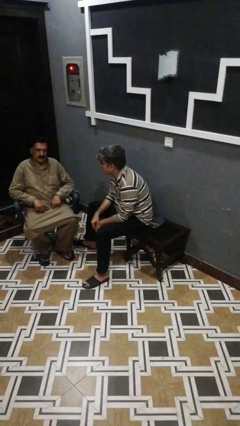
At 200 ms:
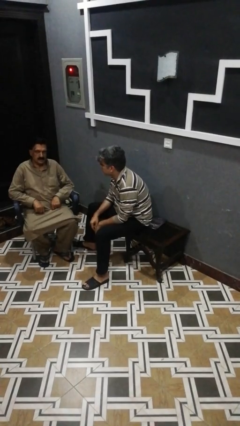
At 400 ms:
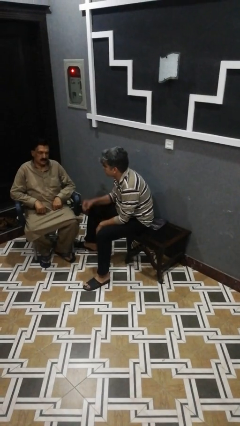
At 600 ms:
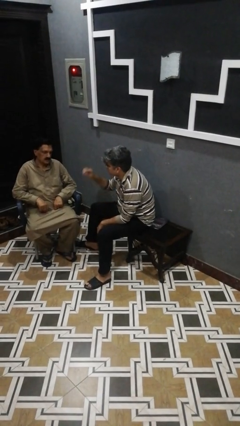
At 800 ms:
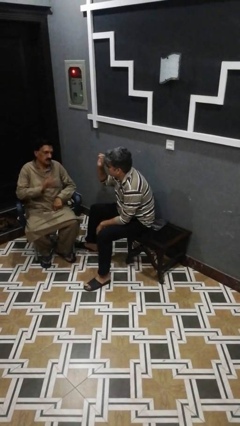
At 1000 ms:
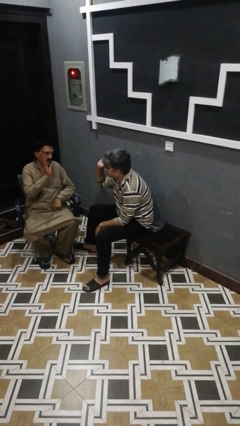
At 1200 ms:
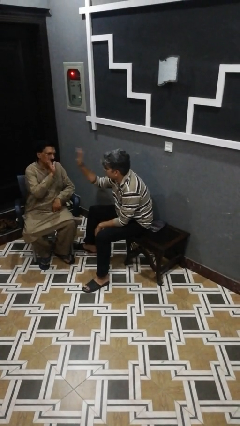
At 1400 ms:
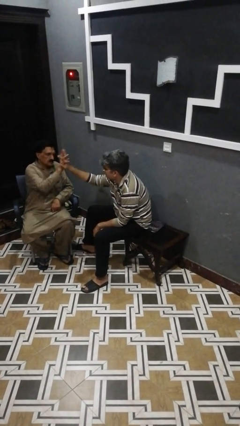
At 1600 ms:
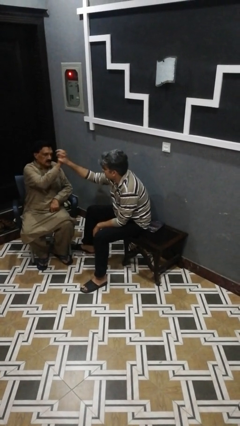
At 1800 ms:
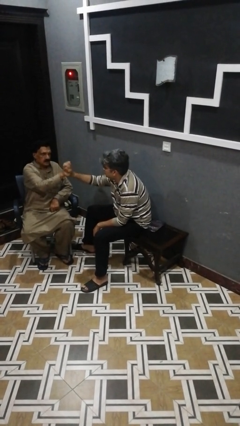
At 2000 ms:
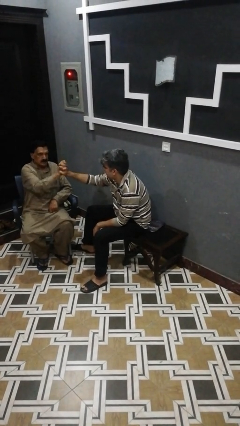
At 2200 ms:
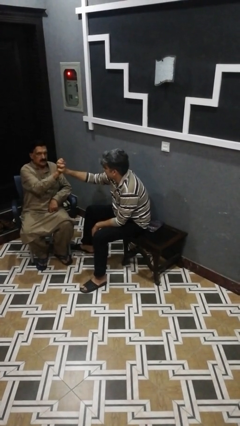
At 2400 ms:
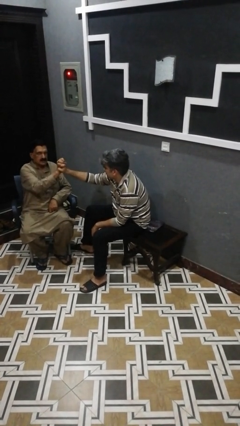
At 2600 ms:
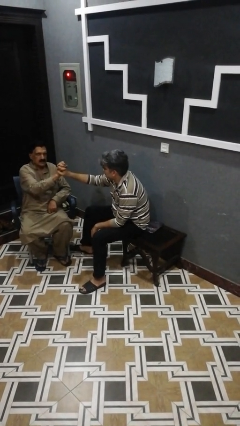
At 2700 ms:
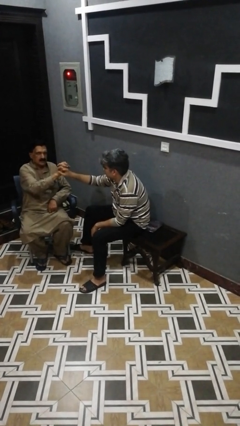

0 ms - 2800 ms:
person highfives hand

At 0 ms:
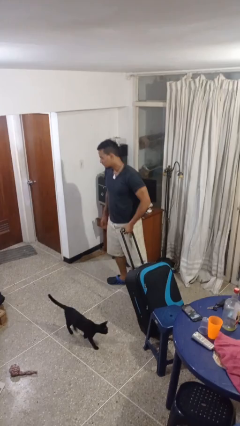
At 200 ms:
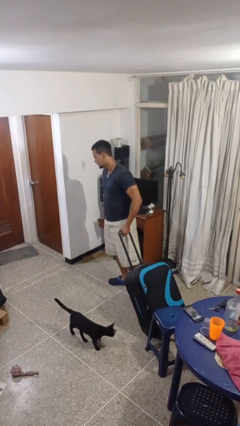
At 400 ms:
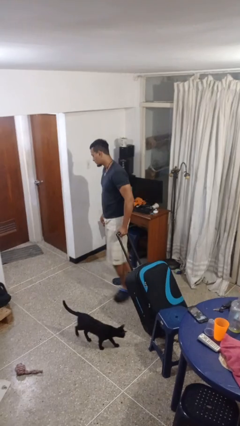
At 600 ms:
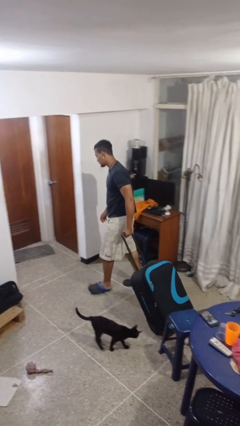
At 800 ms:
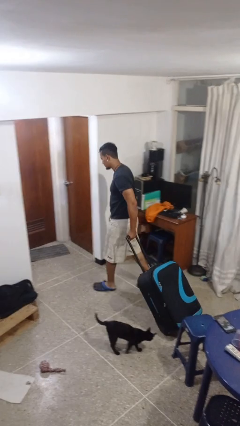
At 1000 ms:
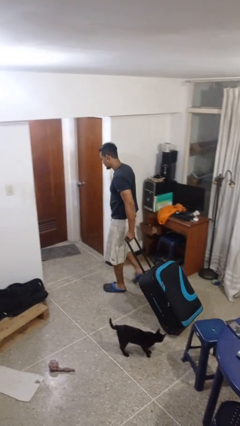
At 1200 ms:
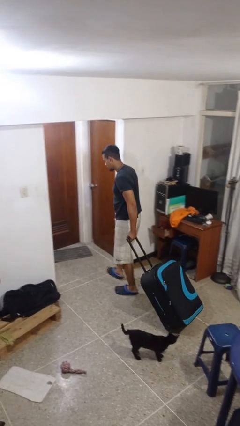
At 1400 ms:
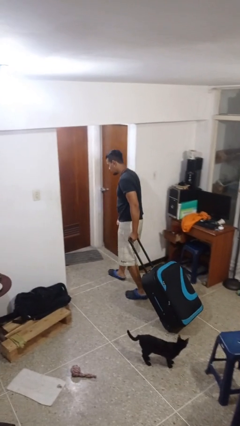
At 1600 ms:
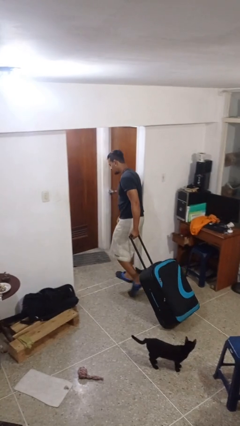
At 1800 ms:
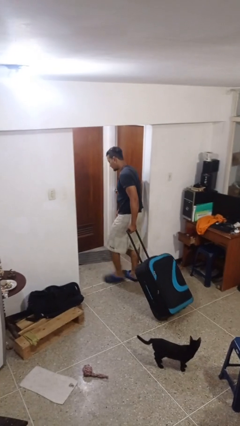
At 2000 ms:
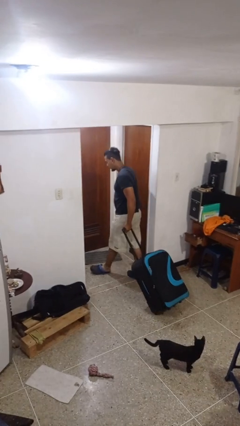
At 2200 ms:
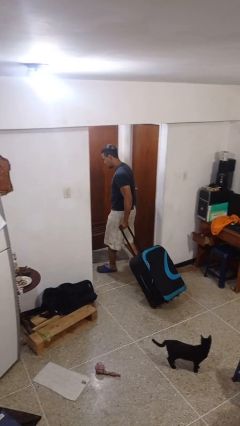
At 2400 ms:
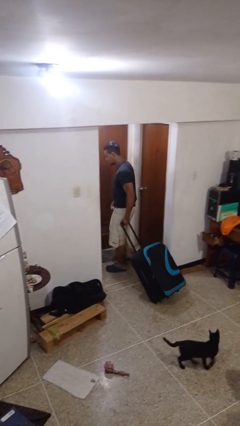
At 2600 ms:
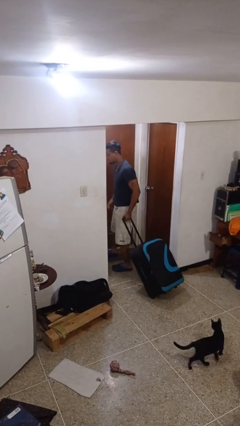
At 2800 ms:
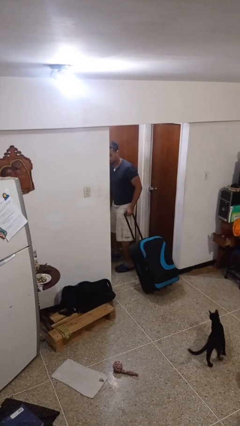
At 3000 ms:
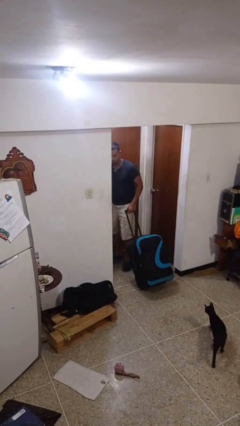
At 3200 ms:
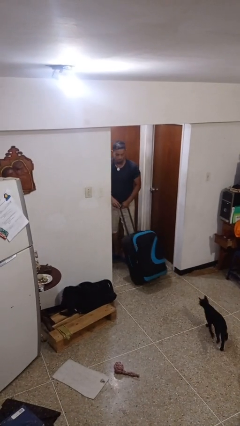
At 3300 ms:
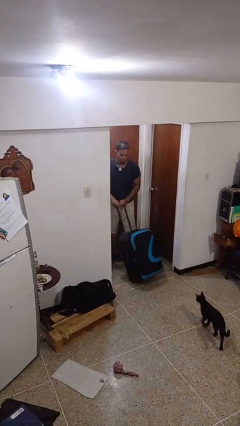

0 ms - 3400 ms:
person pulls wheeled cart

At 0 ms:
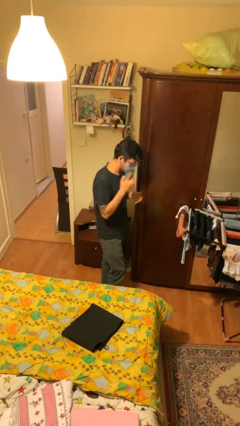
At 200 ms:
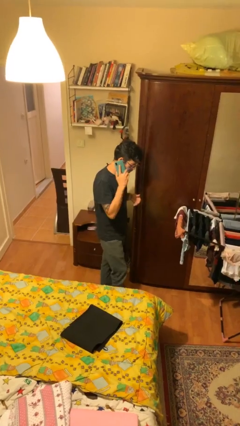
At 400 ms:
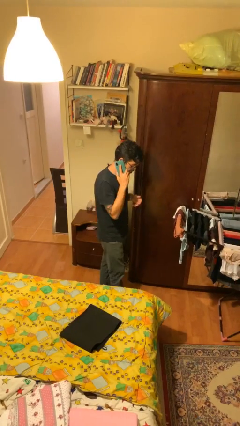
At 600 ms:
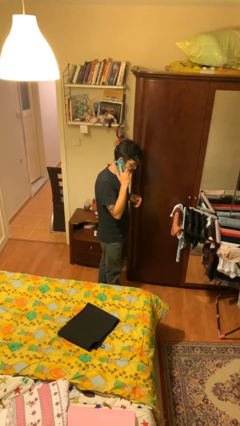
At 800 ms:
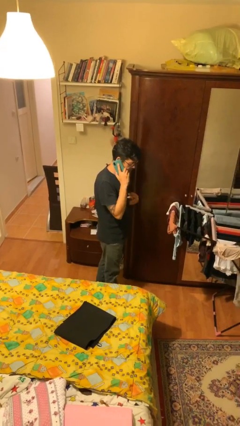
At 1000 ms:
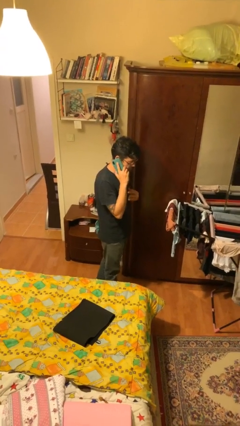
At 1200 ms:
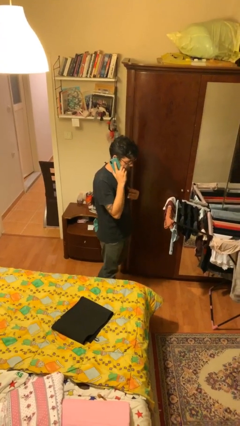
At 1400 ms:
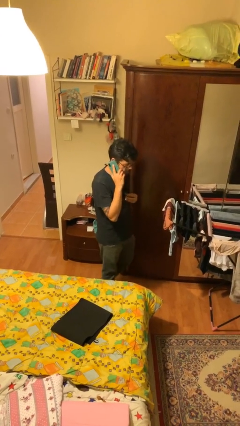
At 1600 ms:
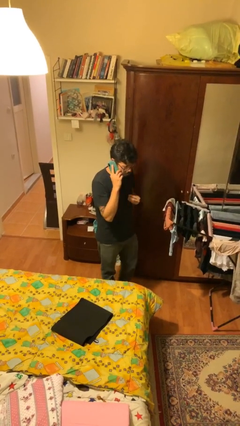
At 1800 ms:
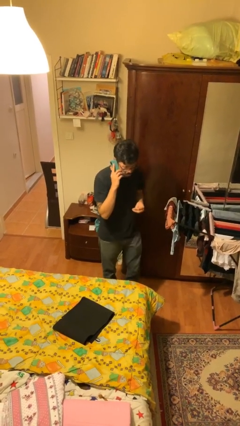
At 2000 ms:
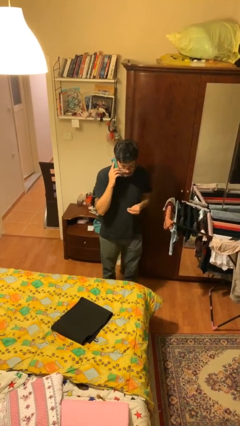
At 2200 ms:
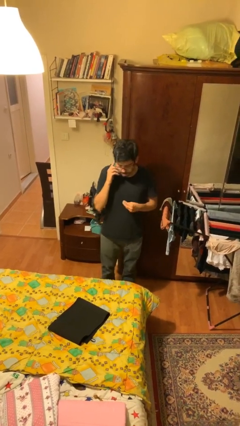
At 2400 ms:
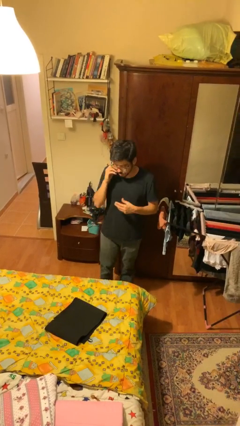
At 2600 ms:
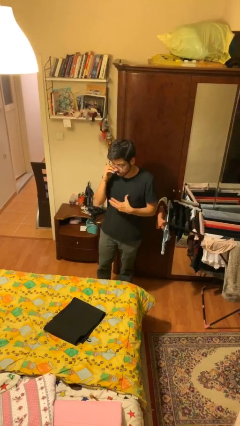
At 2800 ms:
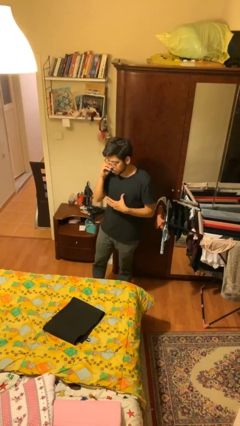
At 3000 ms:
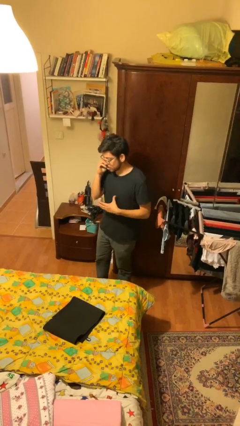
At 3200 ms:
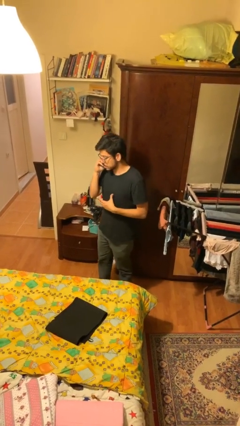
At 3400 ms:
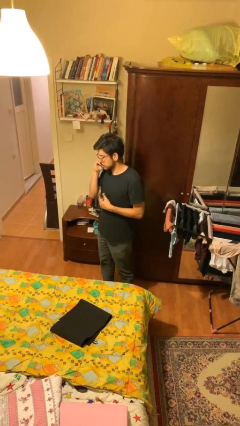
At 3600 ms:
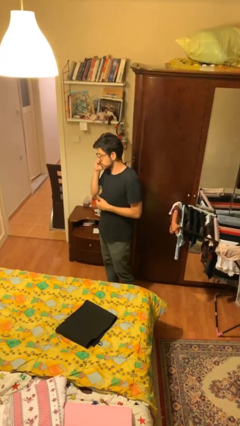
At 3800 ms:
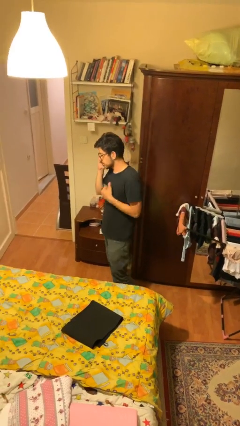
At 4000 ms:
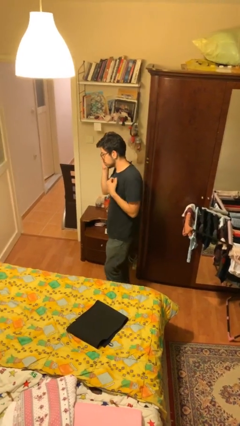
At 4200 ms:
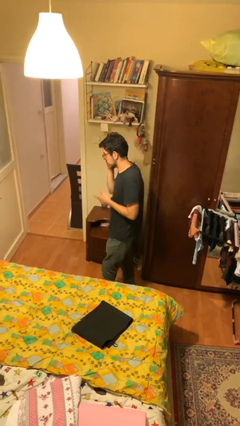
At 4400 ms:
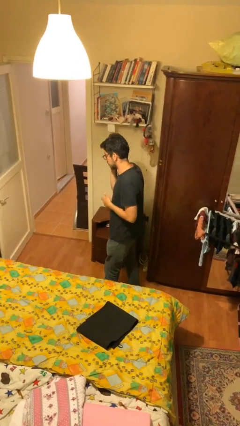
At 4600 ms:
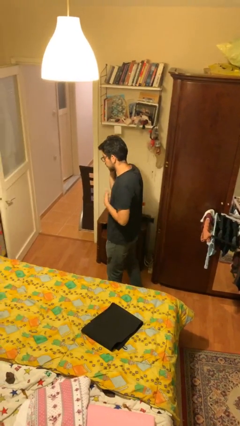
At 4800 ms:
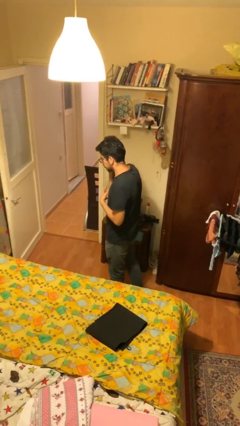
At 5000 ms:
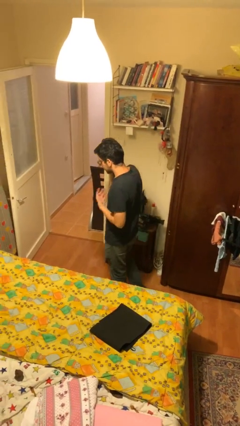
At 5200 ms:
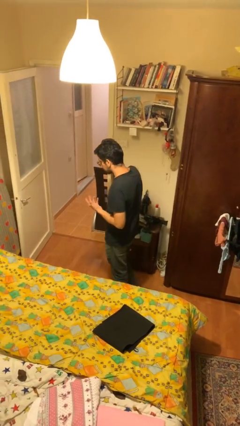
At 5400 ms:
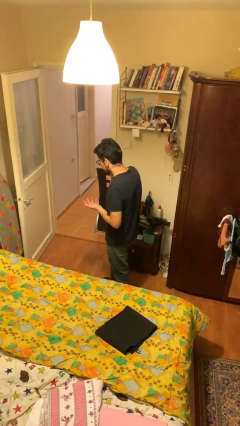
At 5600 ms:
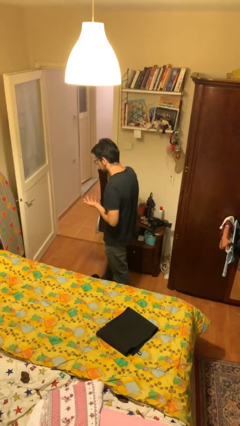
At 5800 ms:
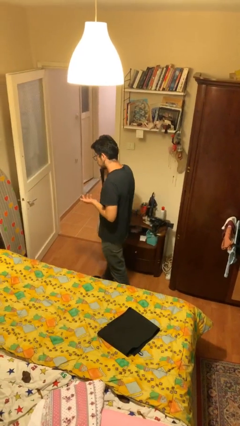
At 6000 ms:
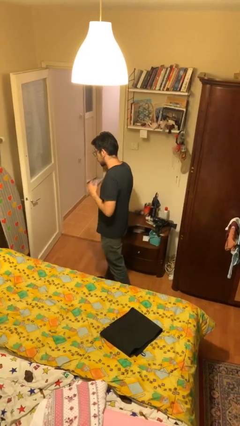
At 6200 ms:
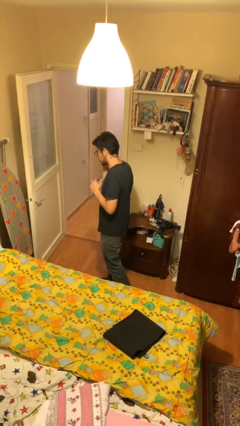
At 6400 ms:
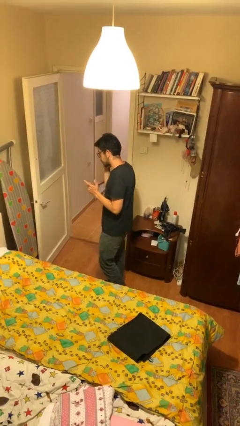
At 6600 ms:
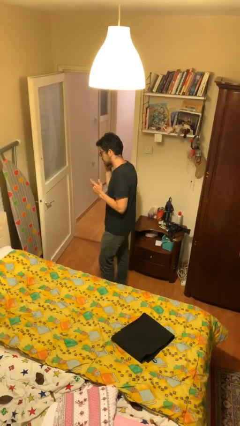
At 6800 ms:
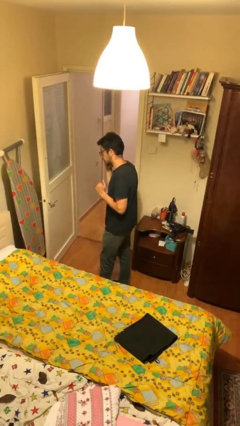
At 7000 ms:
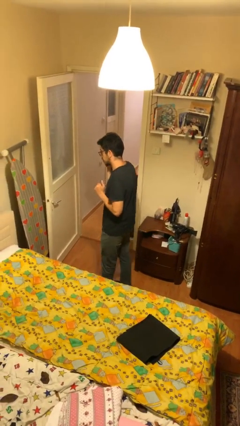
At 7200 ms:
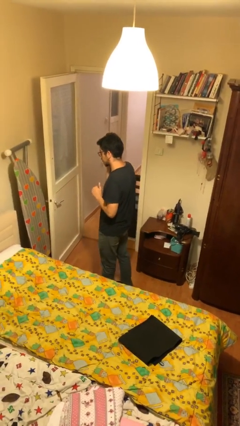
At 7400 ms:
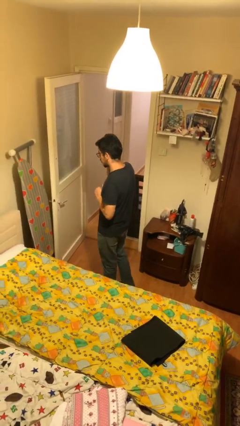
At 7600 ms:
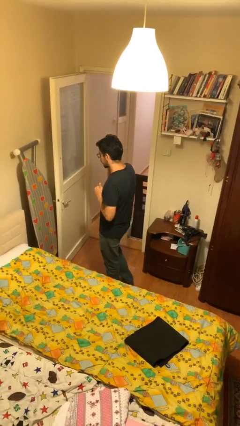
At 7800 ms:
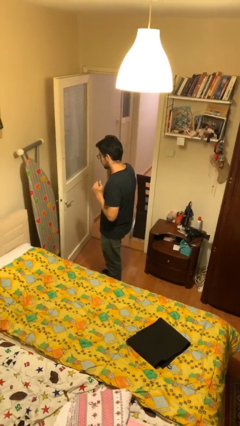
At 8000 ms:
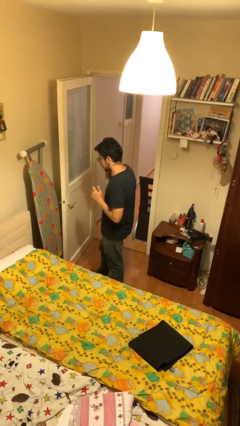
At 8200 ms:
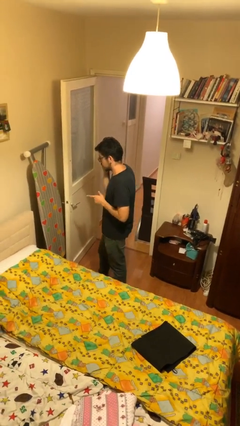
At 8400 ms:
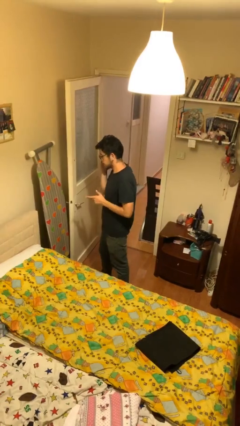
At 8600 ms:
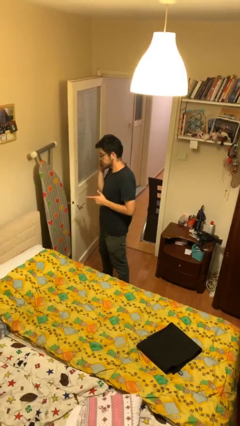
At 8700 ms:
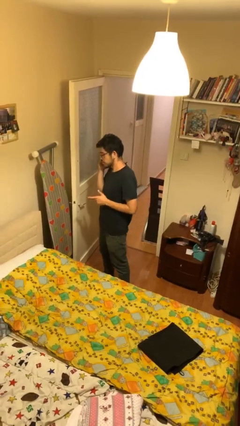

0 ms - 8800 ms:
person talks on phone

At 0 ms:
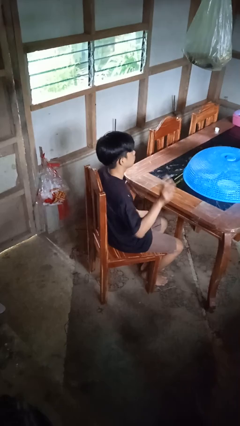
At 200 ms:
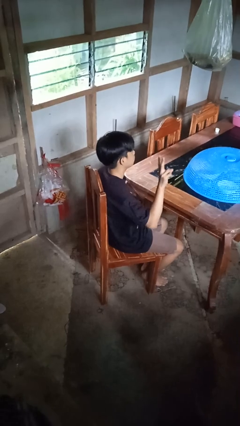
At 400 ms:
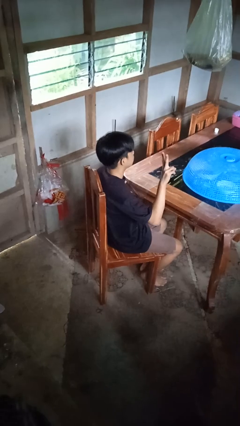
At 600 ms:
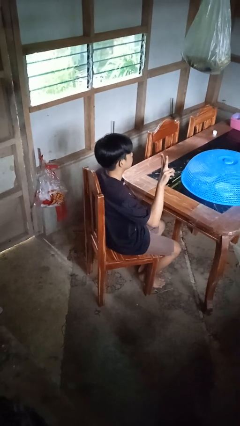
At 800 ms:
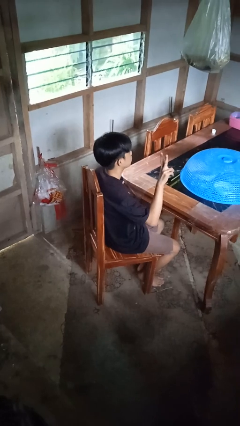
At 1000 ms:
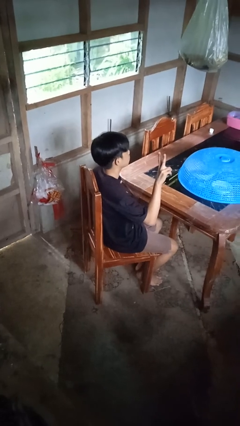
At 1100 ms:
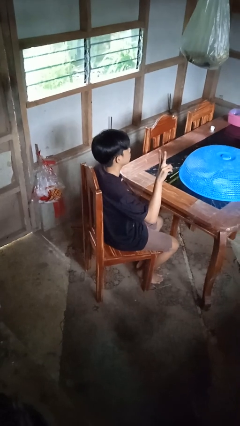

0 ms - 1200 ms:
person gestures peace

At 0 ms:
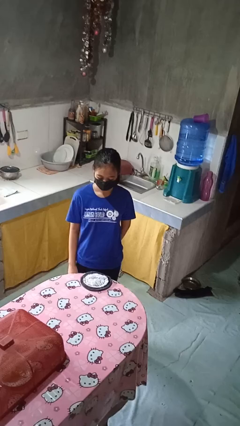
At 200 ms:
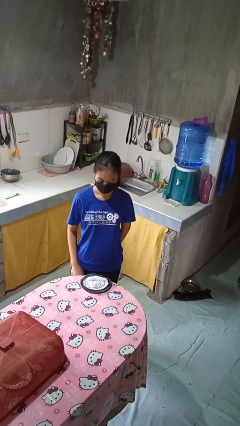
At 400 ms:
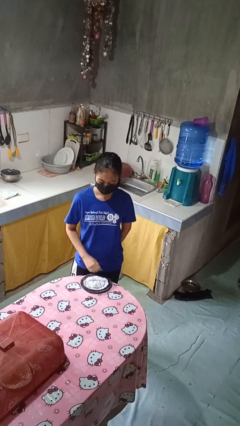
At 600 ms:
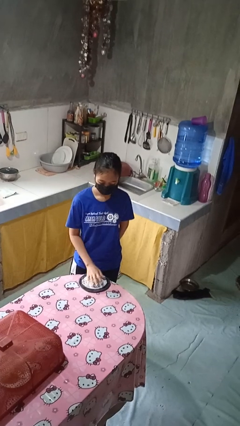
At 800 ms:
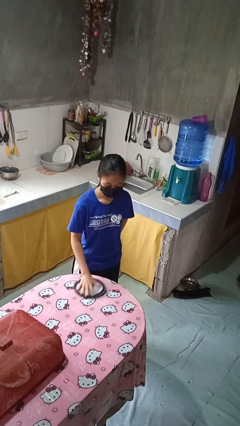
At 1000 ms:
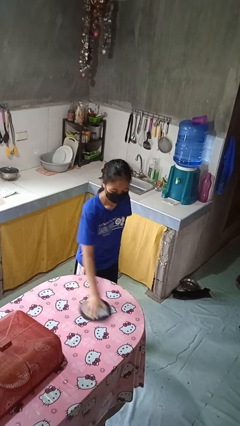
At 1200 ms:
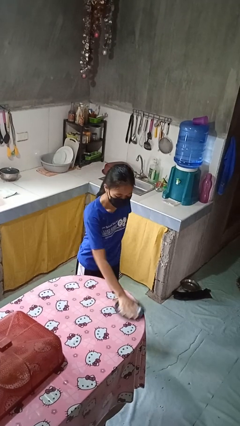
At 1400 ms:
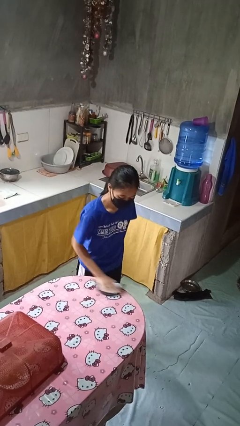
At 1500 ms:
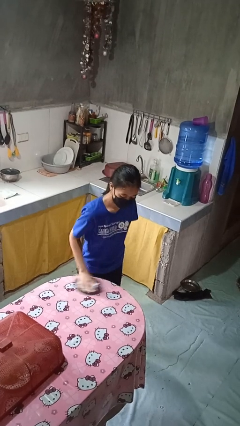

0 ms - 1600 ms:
person cleans table with rag
